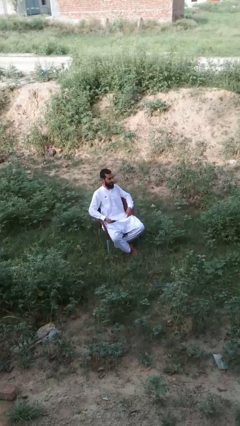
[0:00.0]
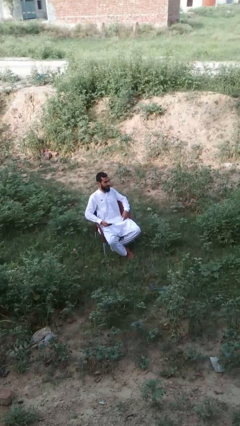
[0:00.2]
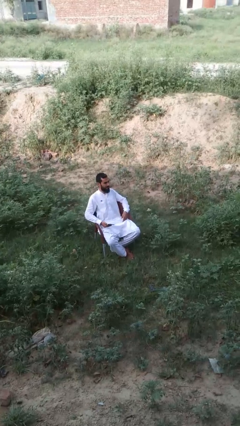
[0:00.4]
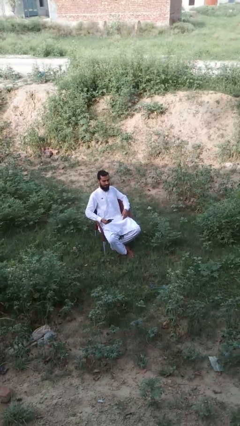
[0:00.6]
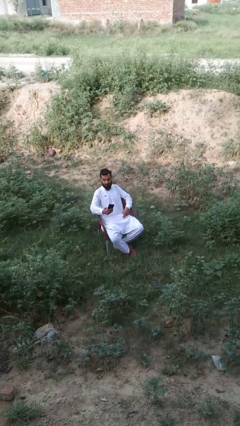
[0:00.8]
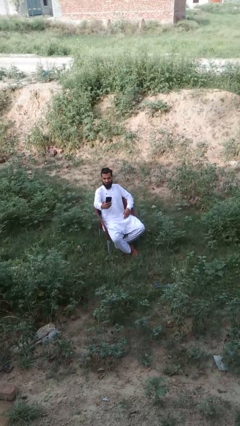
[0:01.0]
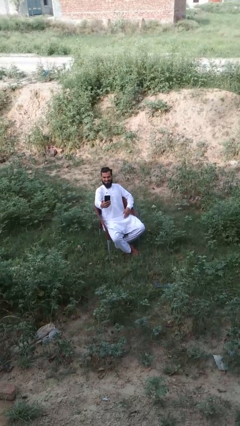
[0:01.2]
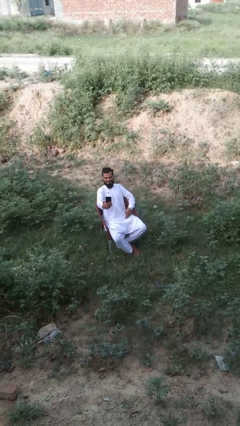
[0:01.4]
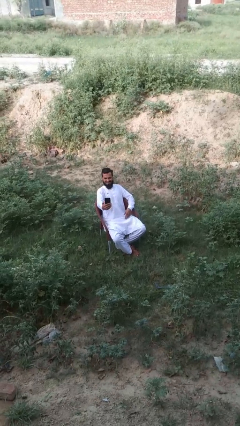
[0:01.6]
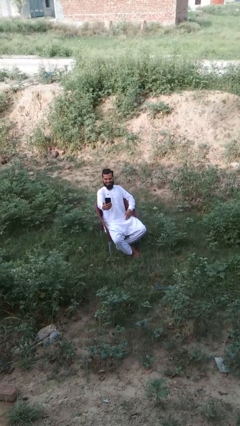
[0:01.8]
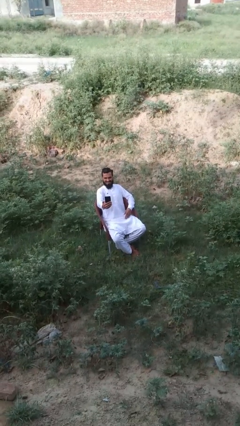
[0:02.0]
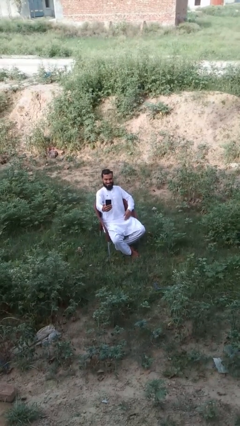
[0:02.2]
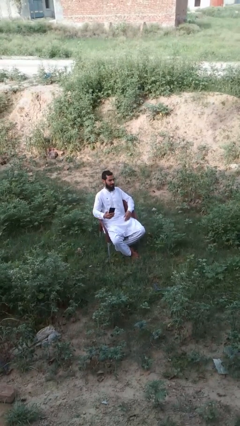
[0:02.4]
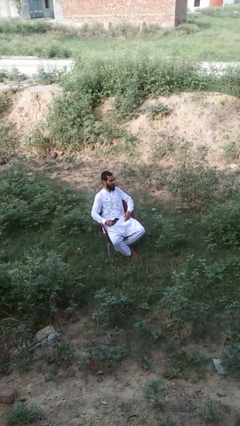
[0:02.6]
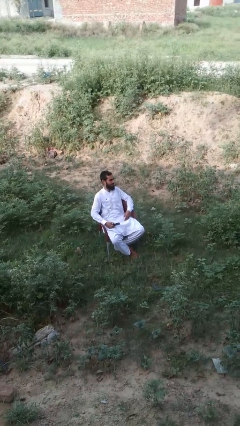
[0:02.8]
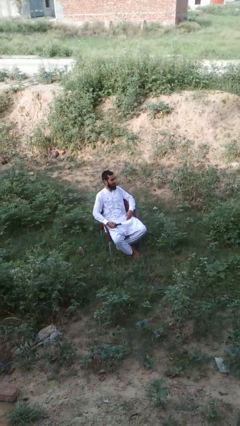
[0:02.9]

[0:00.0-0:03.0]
person takes selfie

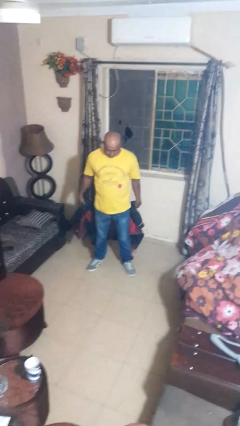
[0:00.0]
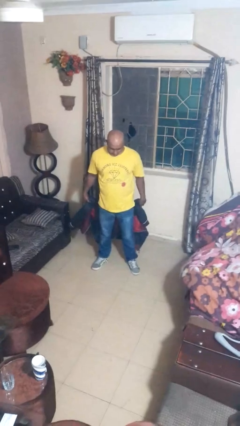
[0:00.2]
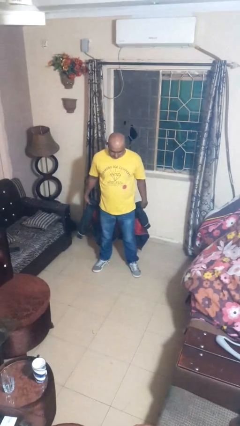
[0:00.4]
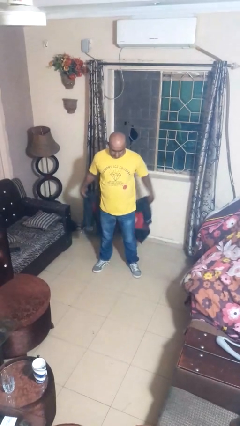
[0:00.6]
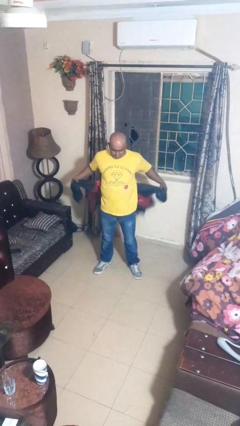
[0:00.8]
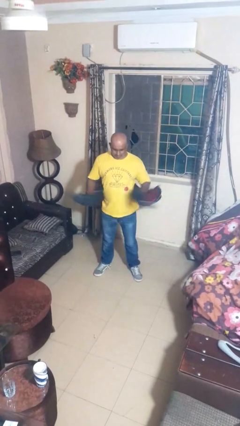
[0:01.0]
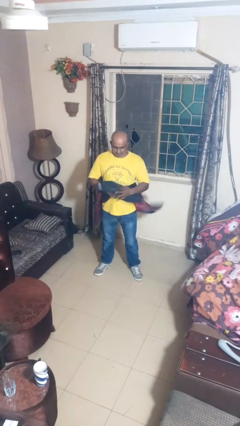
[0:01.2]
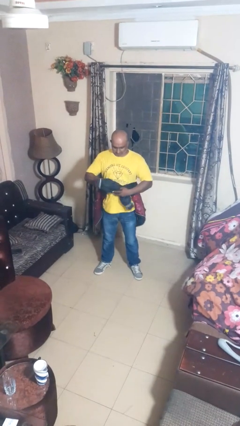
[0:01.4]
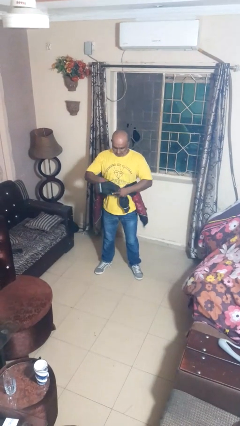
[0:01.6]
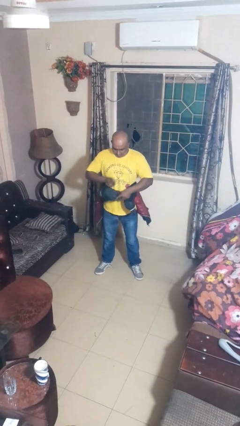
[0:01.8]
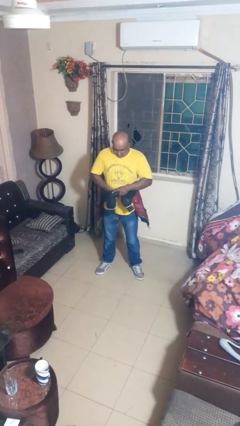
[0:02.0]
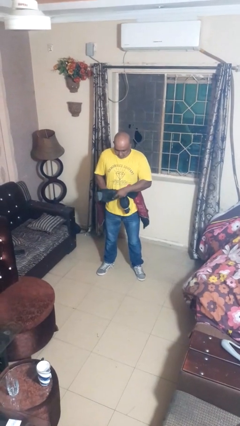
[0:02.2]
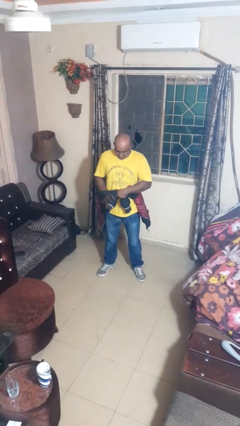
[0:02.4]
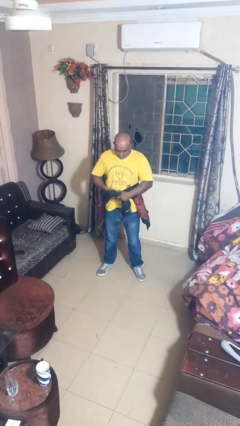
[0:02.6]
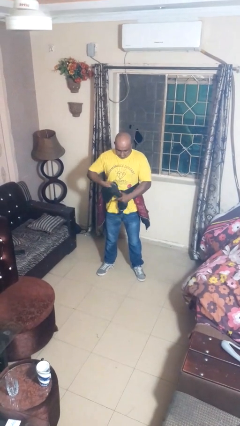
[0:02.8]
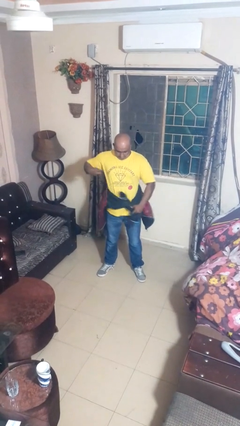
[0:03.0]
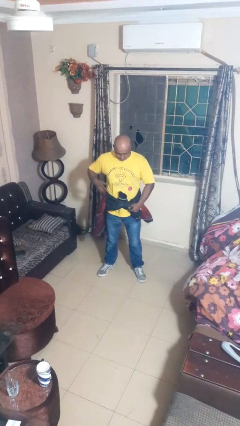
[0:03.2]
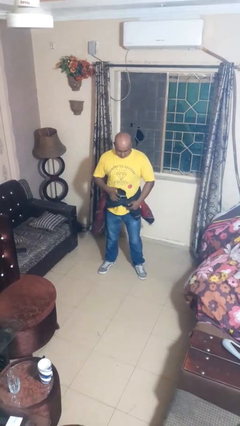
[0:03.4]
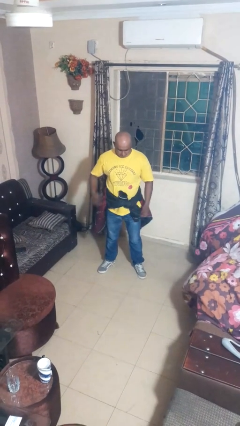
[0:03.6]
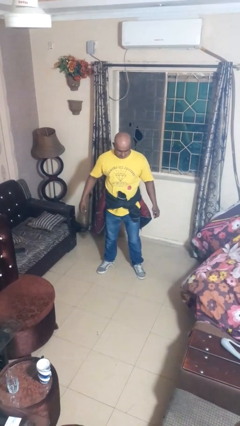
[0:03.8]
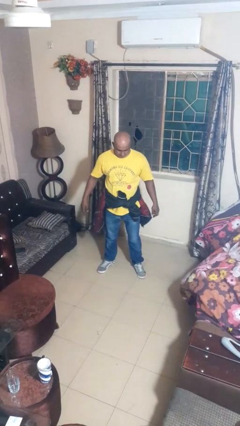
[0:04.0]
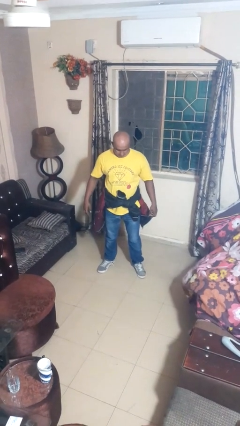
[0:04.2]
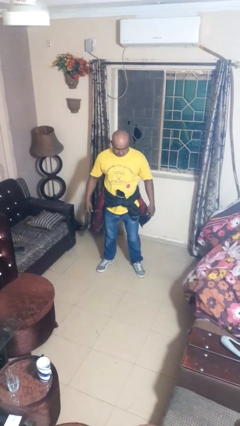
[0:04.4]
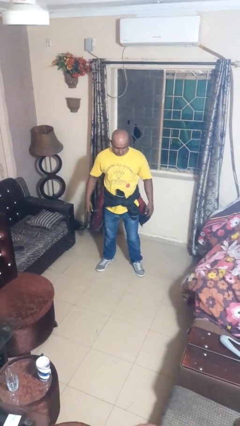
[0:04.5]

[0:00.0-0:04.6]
person ties jacket around waist

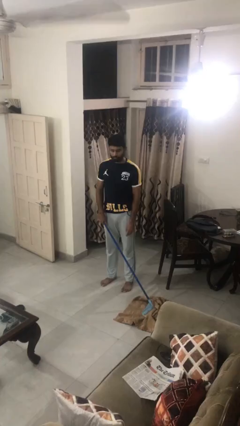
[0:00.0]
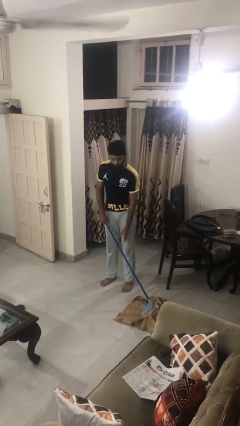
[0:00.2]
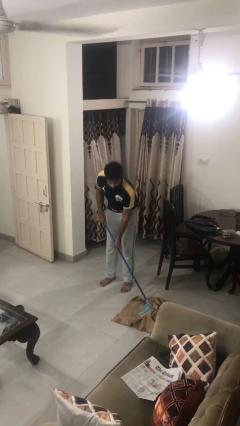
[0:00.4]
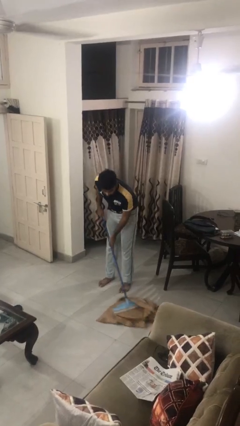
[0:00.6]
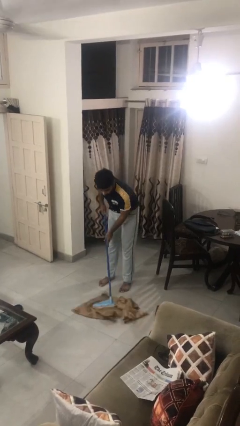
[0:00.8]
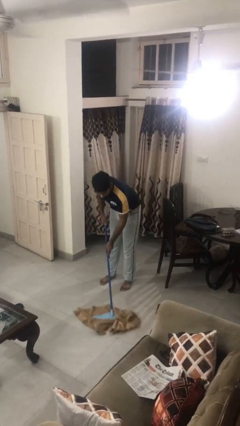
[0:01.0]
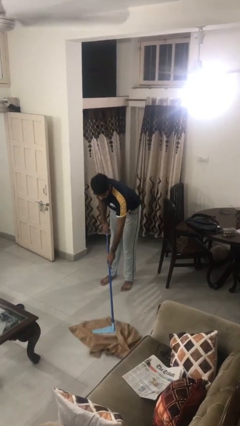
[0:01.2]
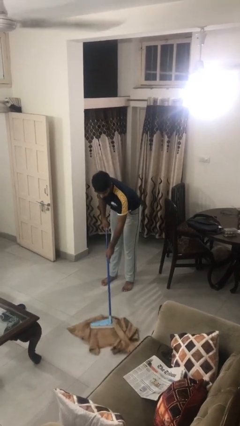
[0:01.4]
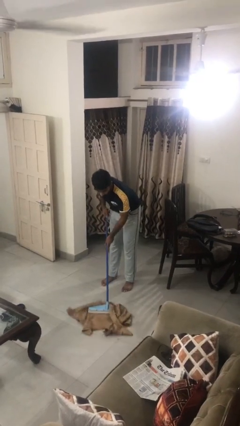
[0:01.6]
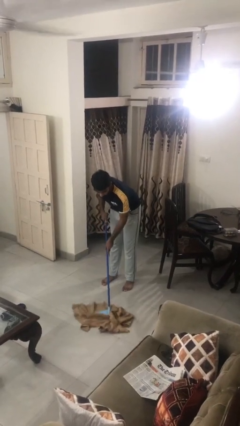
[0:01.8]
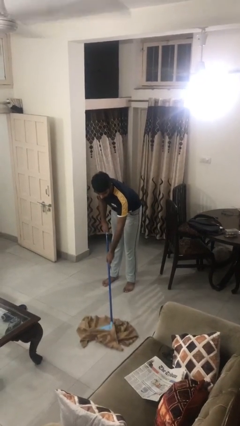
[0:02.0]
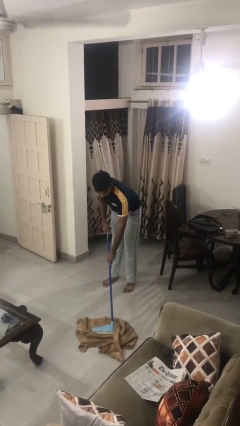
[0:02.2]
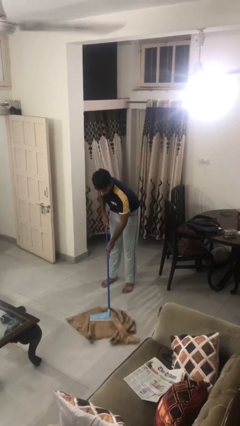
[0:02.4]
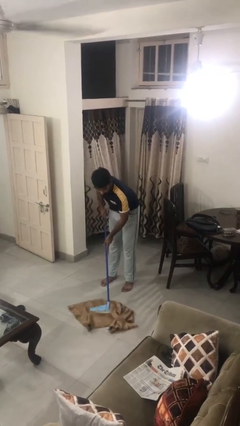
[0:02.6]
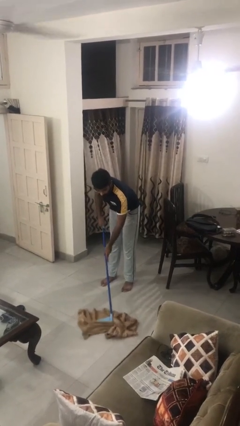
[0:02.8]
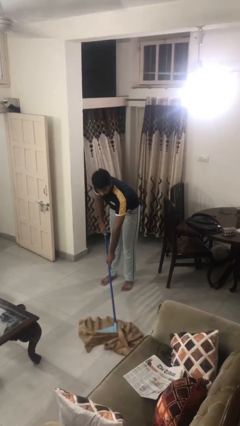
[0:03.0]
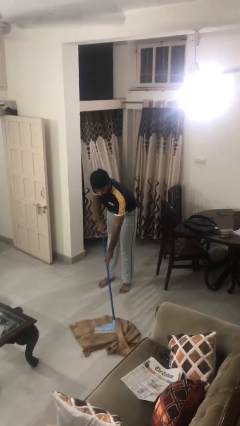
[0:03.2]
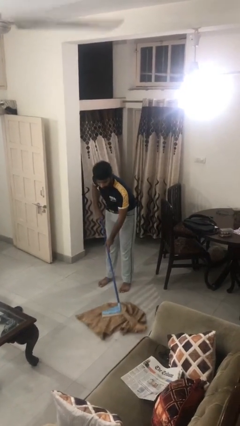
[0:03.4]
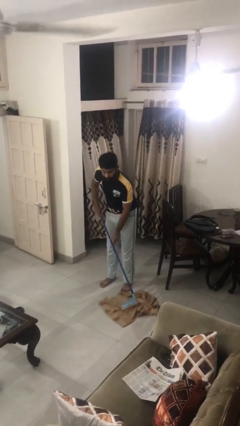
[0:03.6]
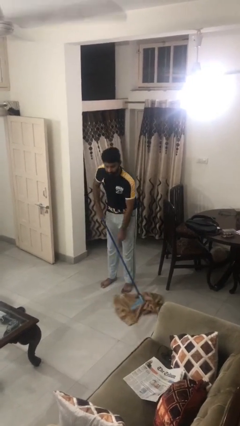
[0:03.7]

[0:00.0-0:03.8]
person mops

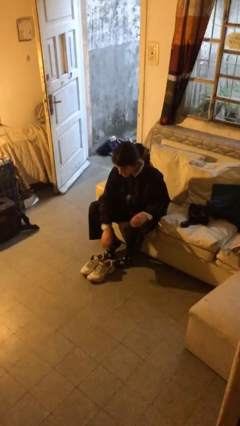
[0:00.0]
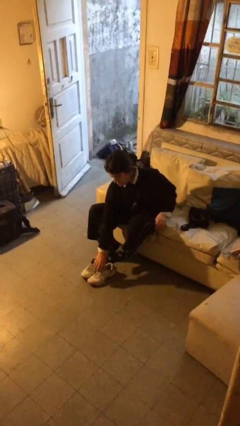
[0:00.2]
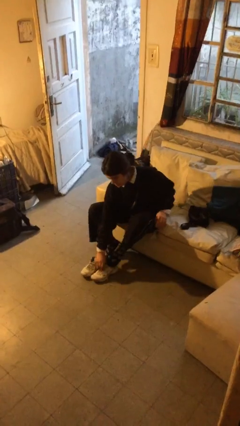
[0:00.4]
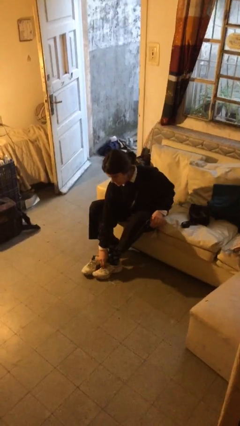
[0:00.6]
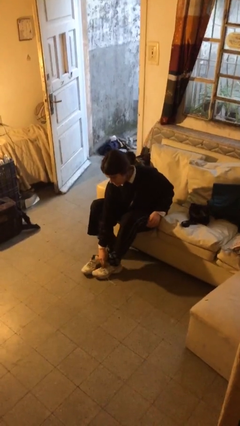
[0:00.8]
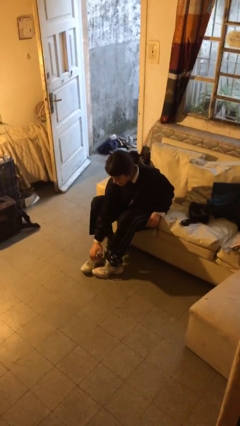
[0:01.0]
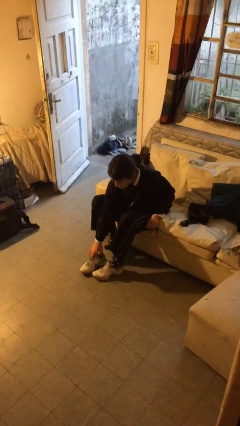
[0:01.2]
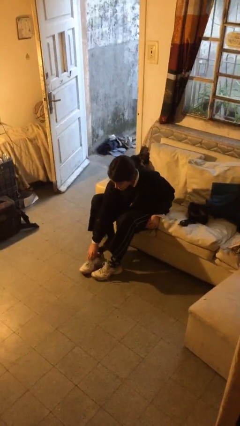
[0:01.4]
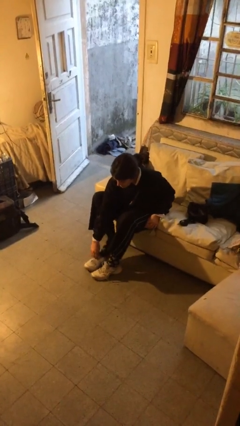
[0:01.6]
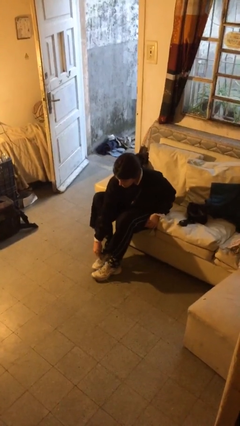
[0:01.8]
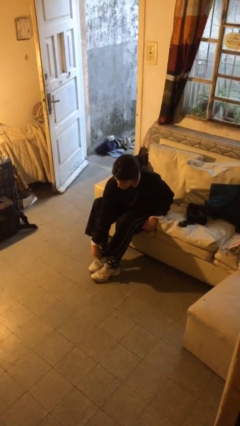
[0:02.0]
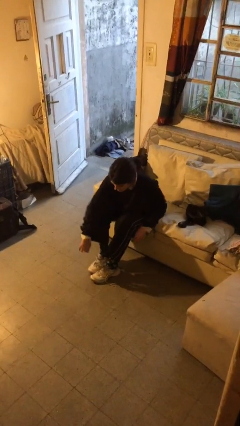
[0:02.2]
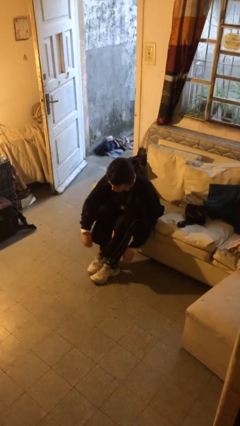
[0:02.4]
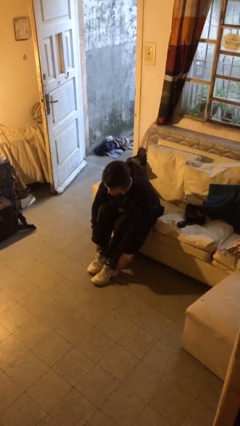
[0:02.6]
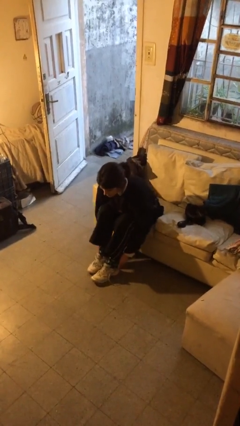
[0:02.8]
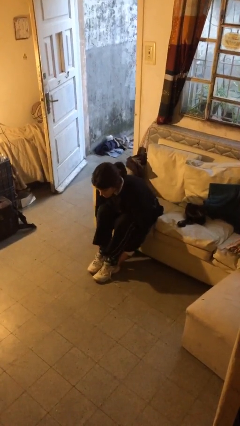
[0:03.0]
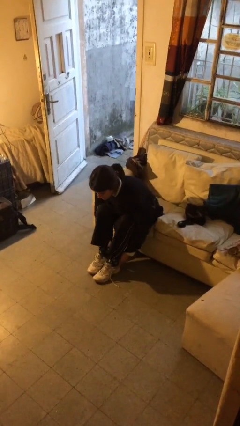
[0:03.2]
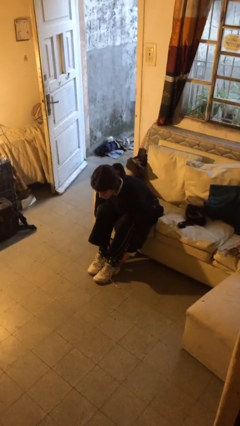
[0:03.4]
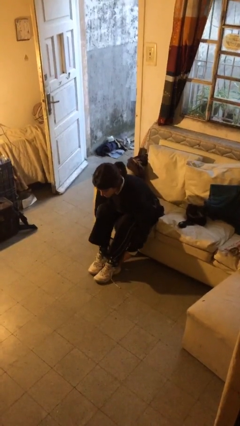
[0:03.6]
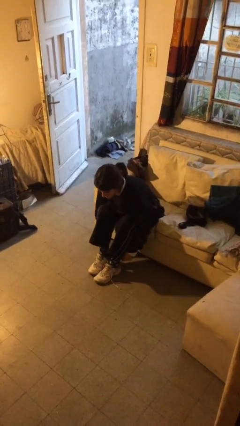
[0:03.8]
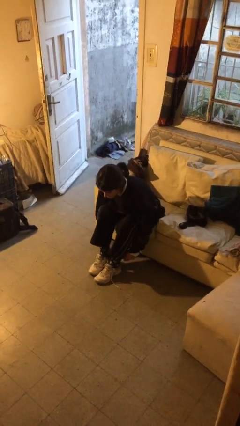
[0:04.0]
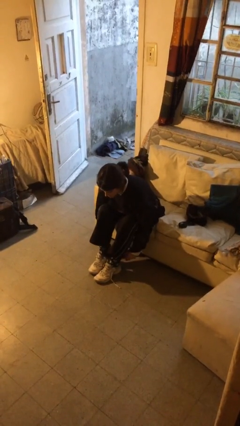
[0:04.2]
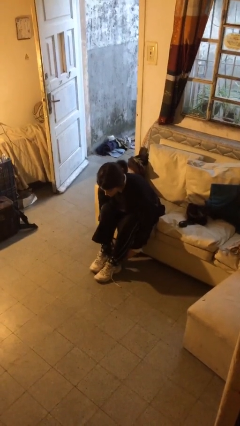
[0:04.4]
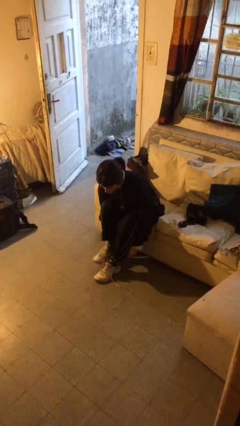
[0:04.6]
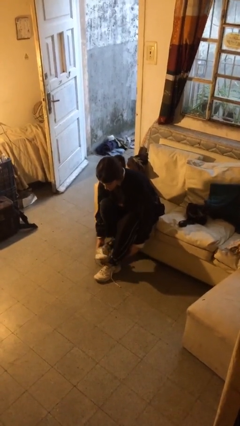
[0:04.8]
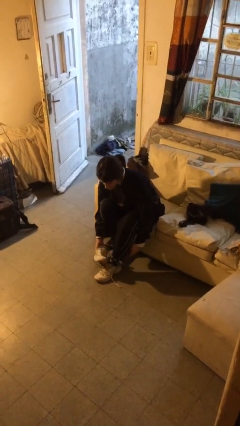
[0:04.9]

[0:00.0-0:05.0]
person puts on shoes

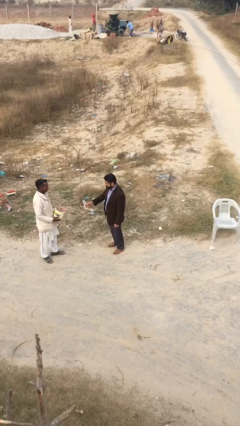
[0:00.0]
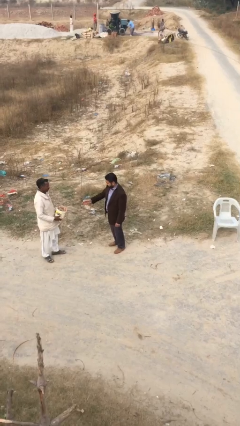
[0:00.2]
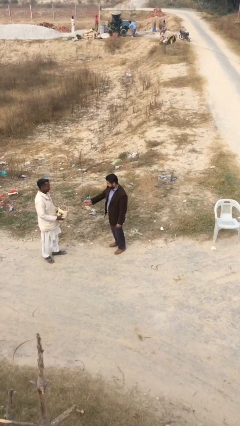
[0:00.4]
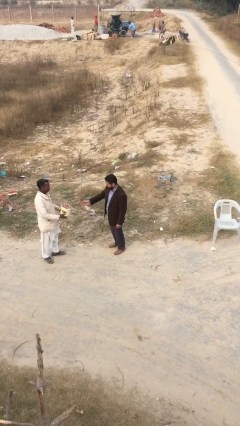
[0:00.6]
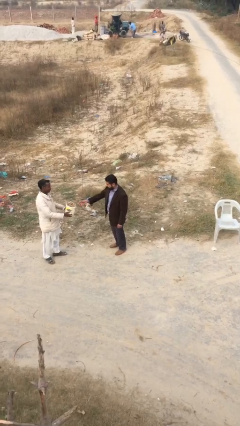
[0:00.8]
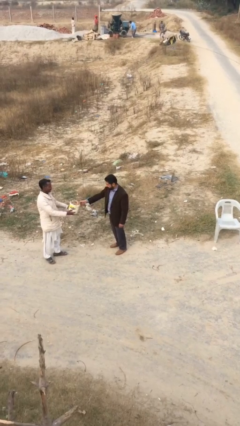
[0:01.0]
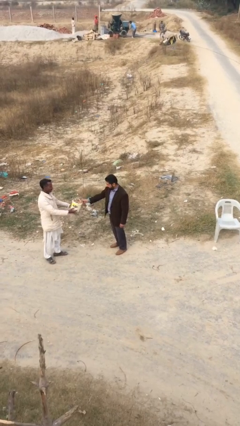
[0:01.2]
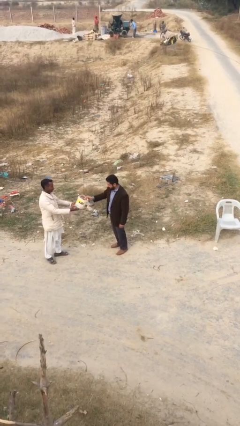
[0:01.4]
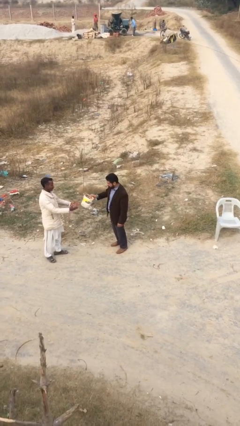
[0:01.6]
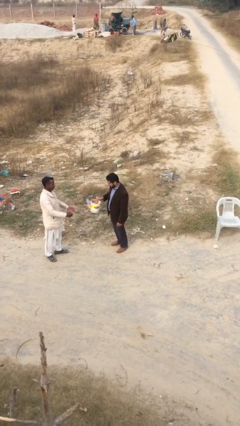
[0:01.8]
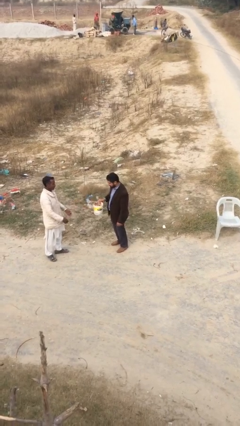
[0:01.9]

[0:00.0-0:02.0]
person transfers object to person
